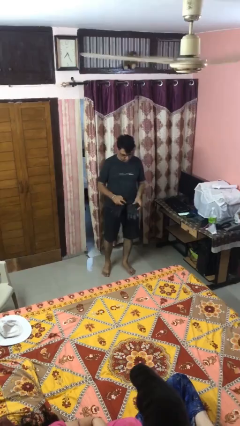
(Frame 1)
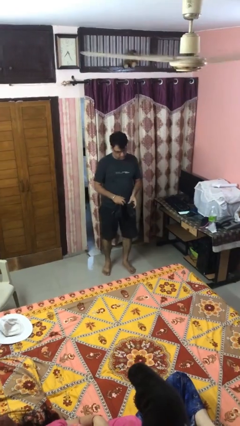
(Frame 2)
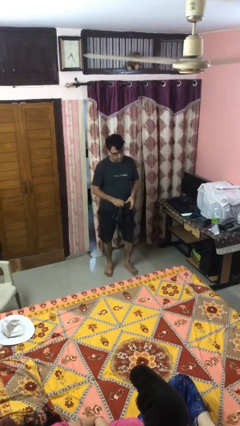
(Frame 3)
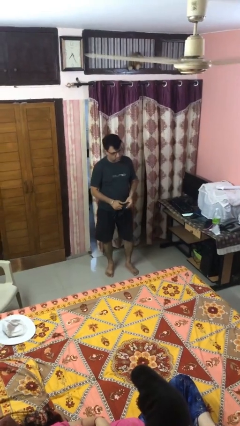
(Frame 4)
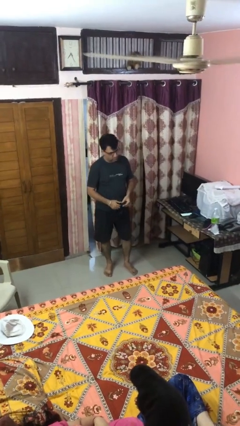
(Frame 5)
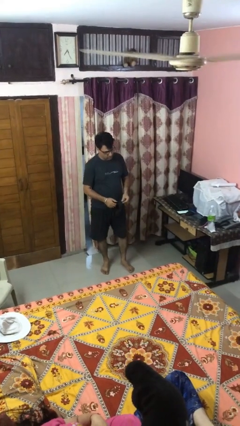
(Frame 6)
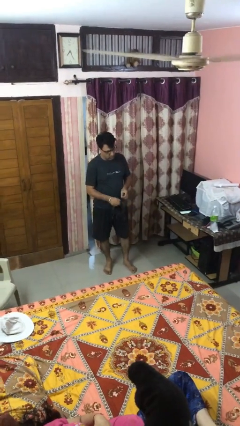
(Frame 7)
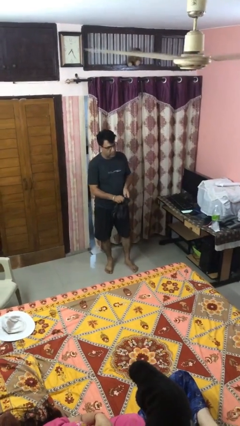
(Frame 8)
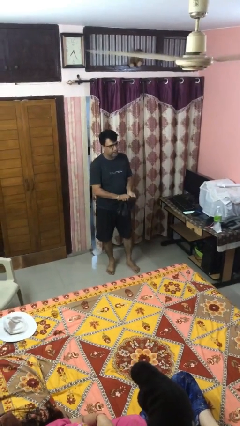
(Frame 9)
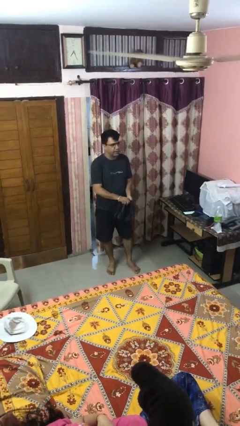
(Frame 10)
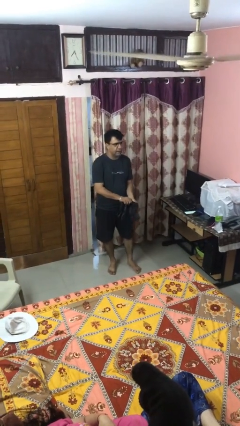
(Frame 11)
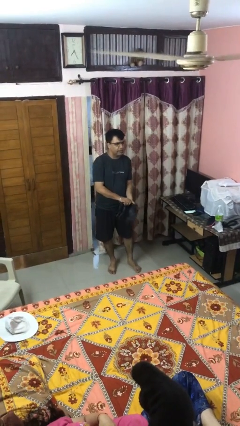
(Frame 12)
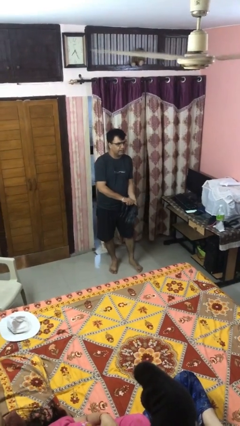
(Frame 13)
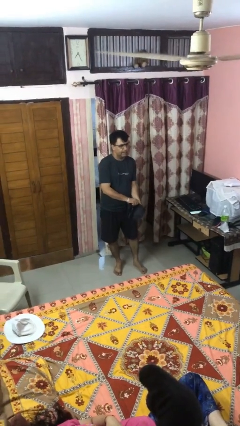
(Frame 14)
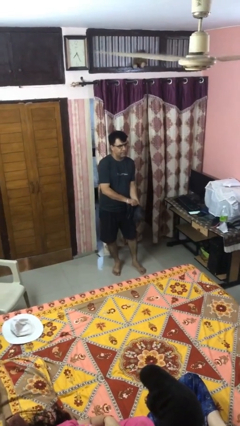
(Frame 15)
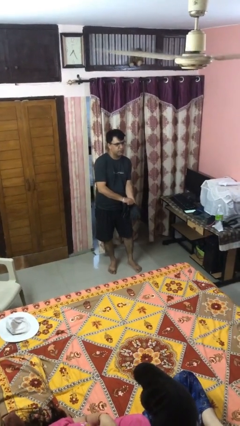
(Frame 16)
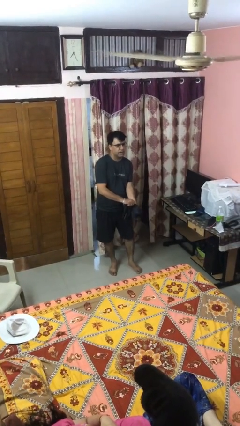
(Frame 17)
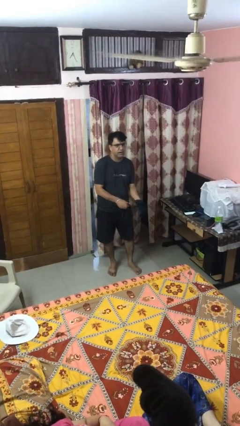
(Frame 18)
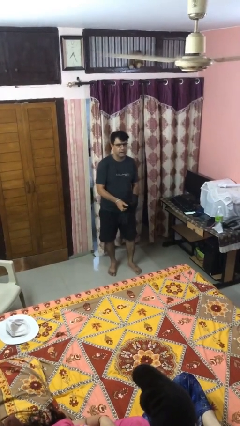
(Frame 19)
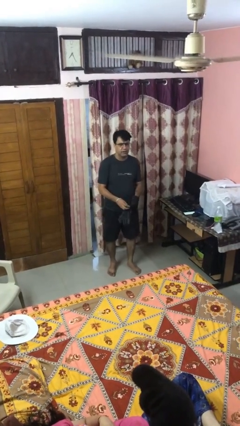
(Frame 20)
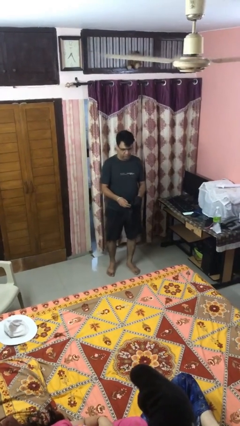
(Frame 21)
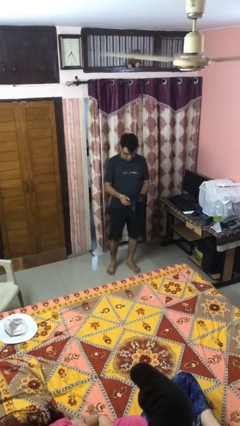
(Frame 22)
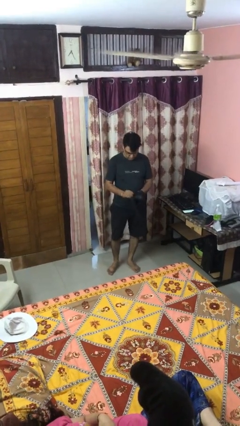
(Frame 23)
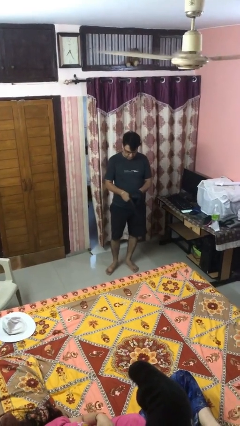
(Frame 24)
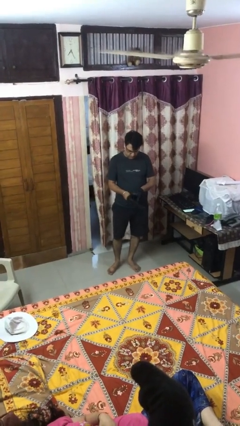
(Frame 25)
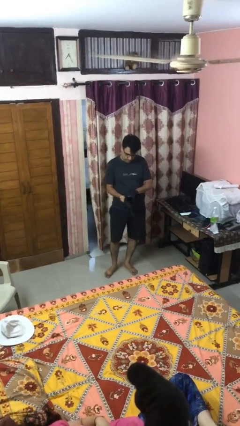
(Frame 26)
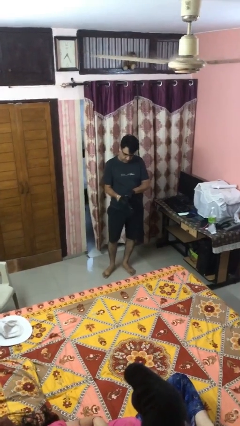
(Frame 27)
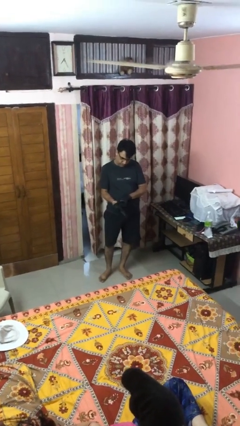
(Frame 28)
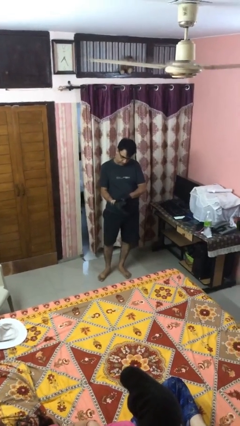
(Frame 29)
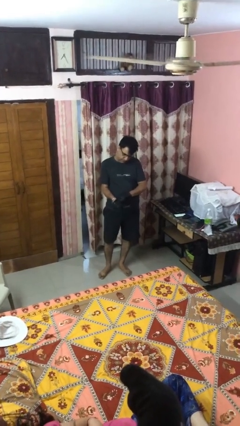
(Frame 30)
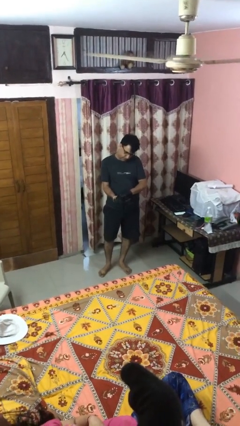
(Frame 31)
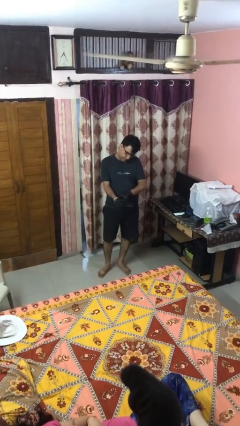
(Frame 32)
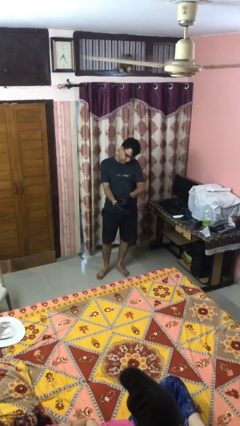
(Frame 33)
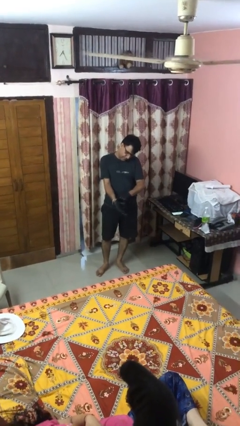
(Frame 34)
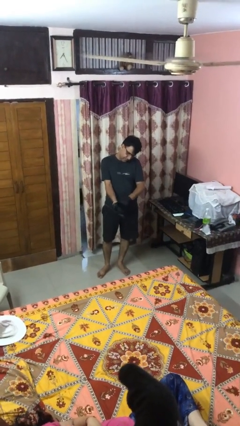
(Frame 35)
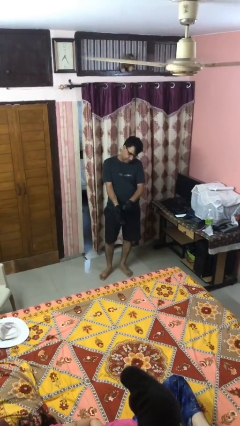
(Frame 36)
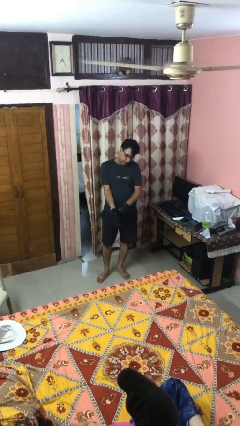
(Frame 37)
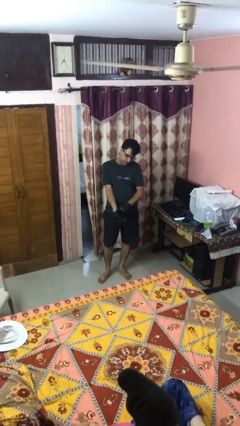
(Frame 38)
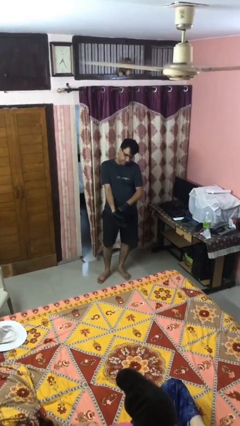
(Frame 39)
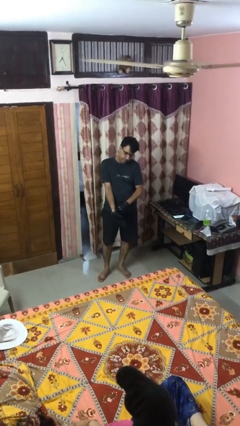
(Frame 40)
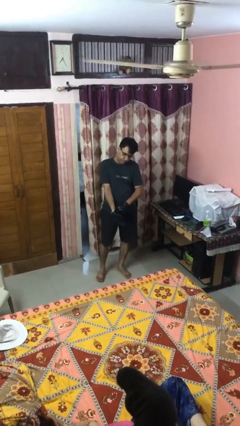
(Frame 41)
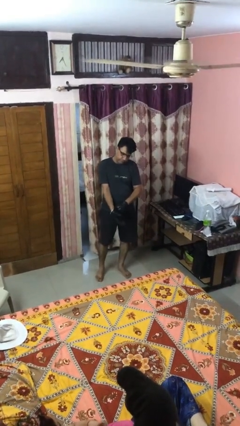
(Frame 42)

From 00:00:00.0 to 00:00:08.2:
person puts on gloves

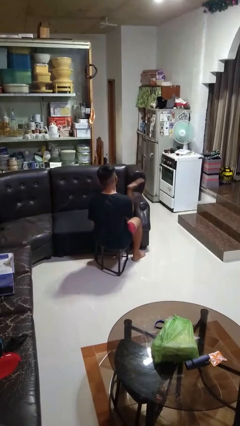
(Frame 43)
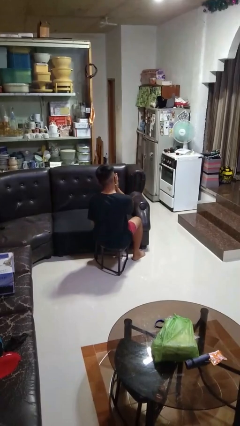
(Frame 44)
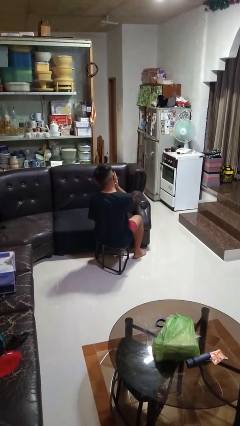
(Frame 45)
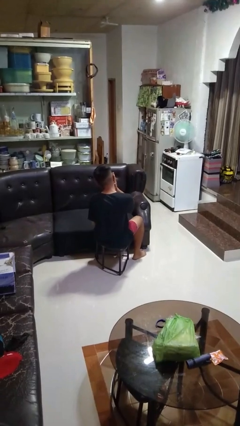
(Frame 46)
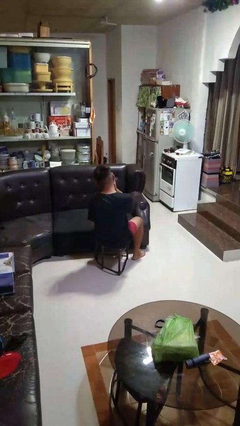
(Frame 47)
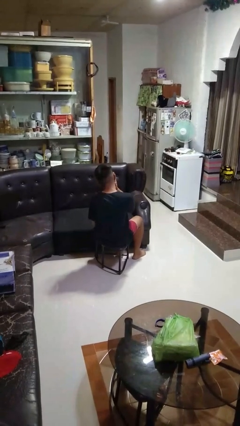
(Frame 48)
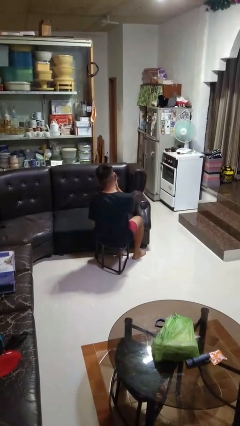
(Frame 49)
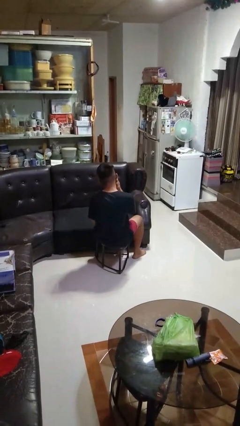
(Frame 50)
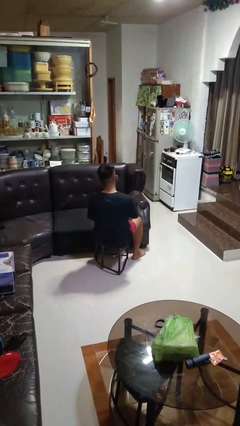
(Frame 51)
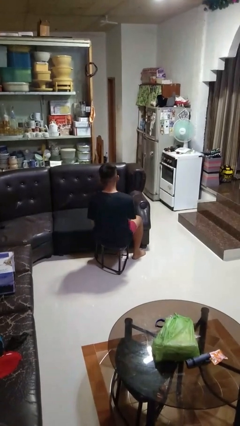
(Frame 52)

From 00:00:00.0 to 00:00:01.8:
person swats bug

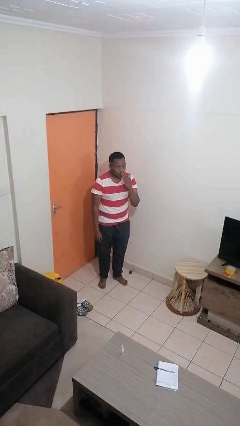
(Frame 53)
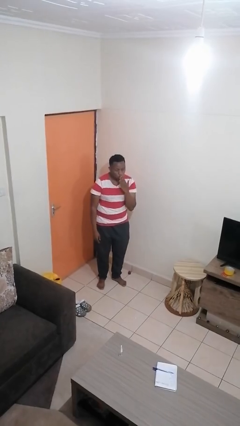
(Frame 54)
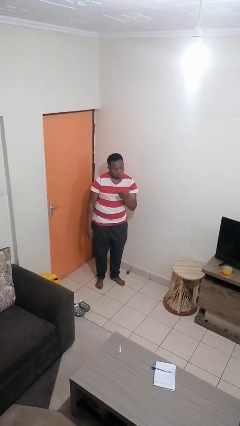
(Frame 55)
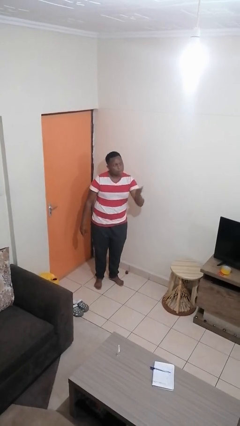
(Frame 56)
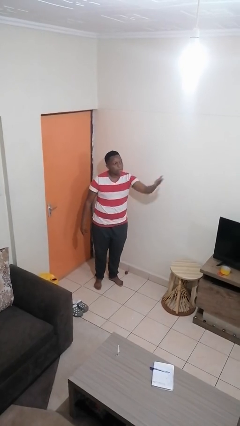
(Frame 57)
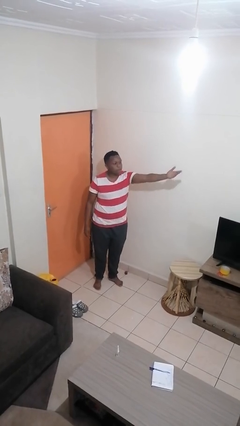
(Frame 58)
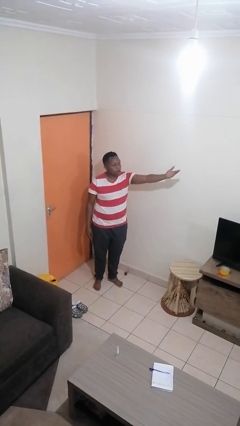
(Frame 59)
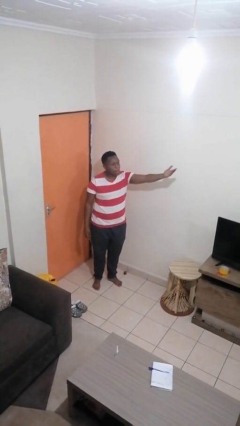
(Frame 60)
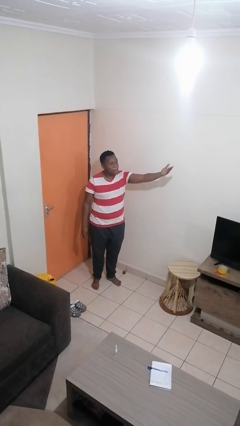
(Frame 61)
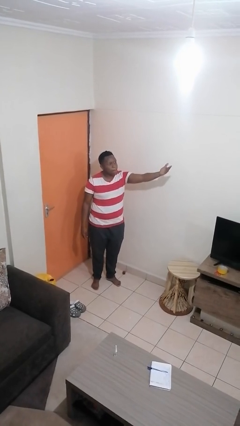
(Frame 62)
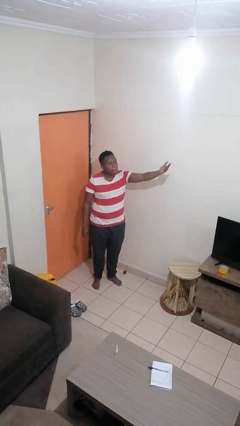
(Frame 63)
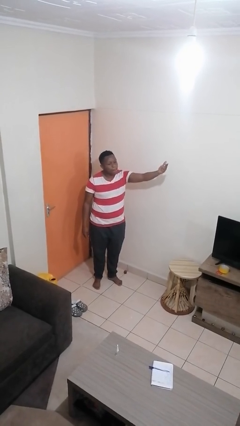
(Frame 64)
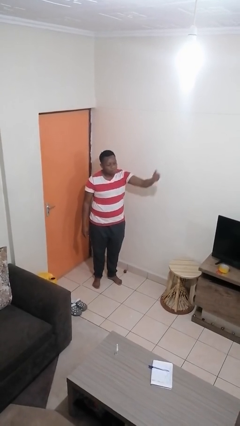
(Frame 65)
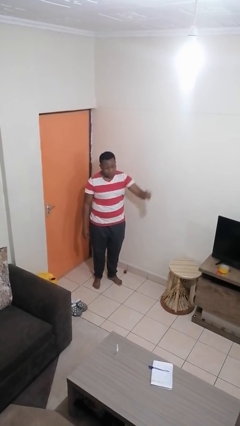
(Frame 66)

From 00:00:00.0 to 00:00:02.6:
person gestures blow kiss

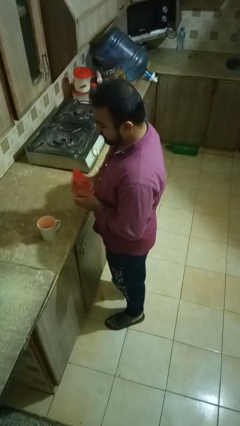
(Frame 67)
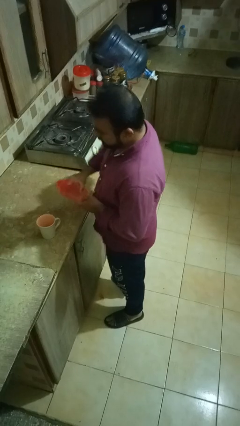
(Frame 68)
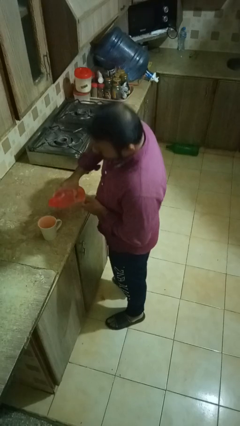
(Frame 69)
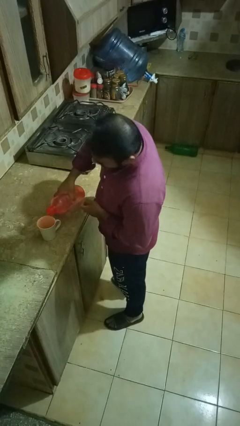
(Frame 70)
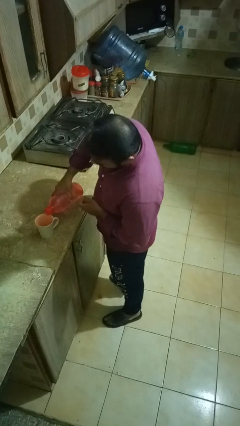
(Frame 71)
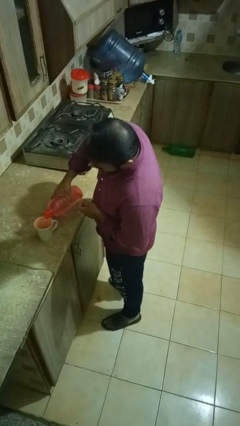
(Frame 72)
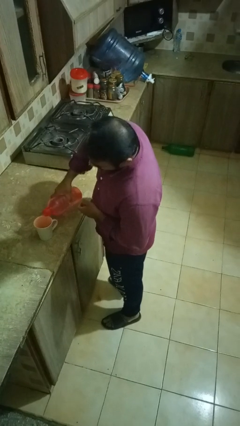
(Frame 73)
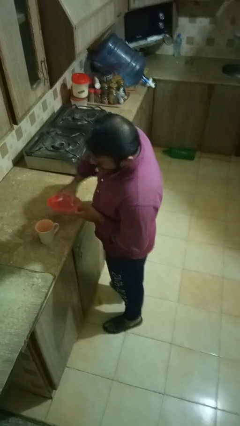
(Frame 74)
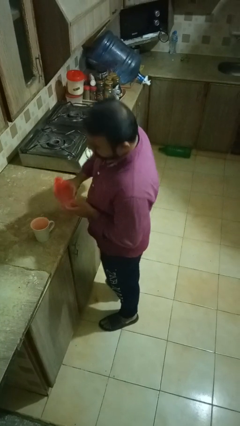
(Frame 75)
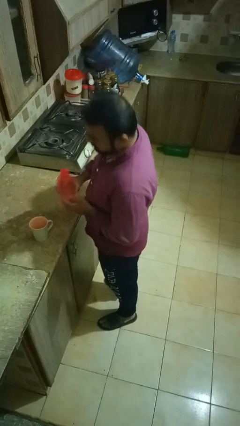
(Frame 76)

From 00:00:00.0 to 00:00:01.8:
person pours liquid into cup

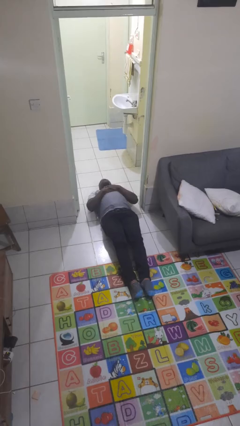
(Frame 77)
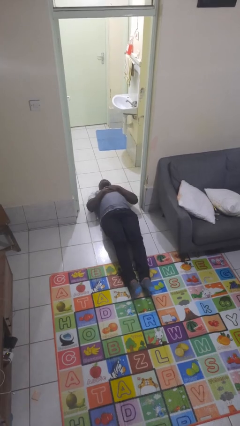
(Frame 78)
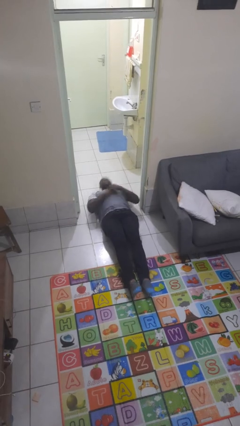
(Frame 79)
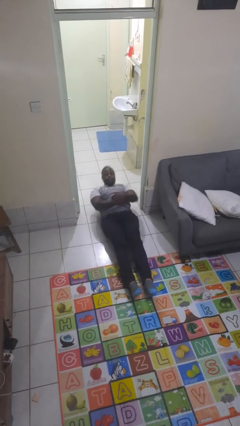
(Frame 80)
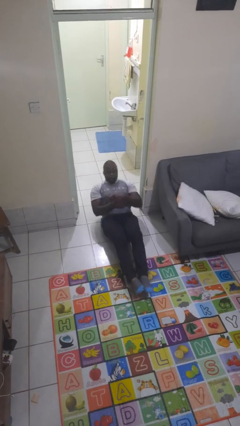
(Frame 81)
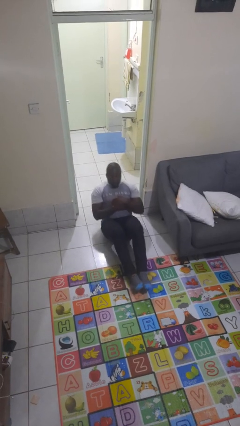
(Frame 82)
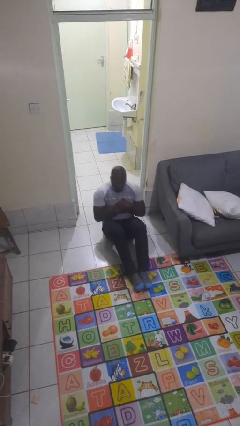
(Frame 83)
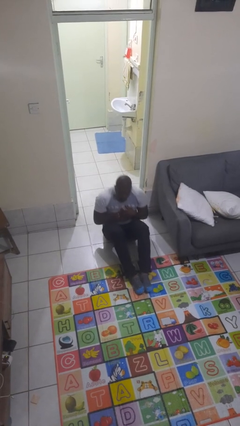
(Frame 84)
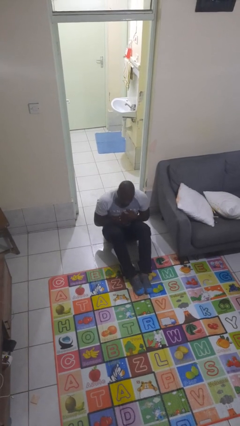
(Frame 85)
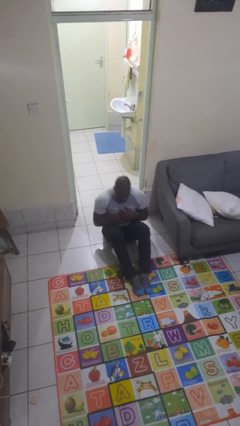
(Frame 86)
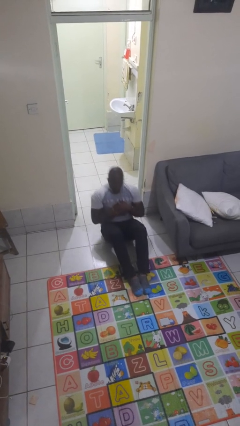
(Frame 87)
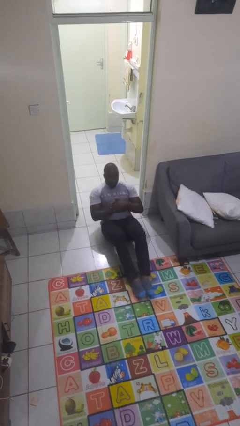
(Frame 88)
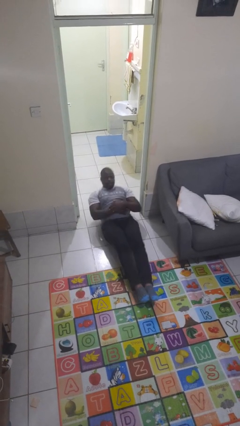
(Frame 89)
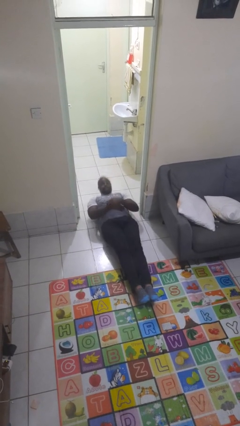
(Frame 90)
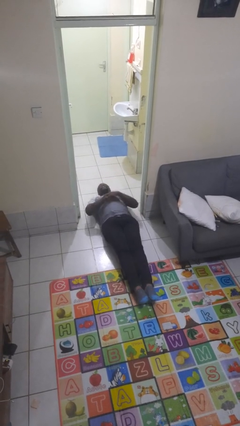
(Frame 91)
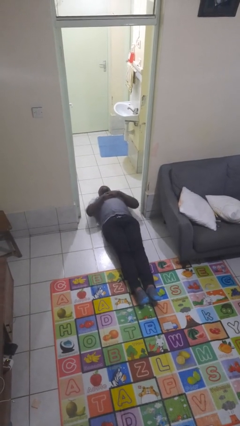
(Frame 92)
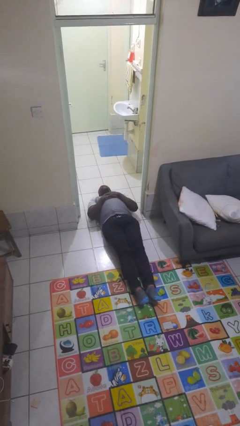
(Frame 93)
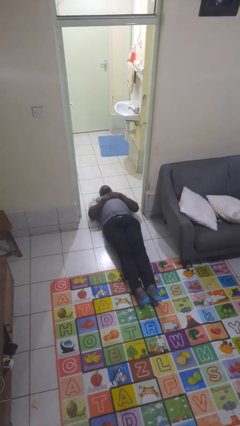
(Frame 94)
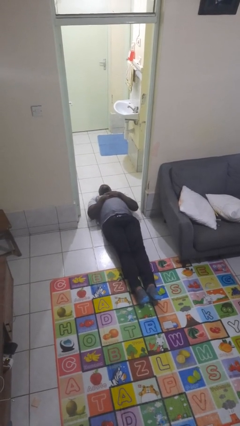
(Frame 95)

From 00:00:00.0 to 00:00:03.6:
person exercises with situp
